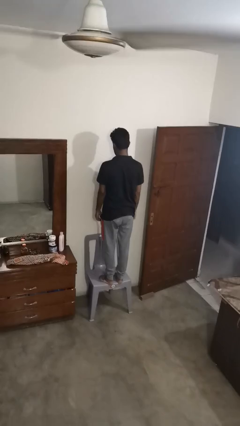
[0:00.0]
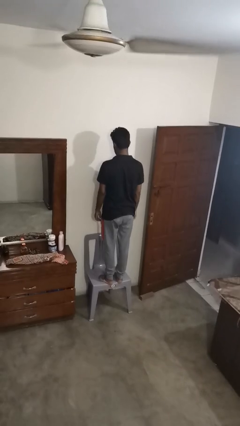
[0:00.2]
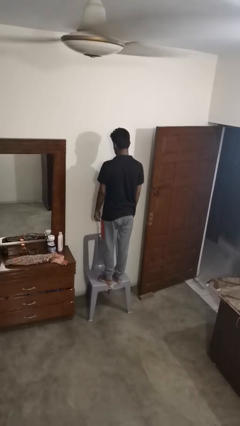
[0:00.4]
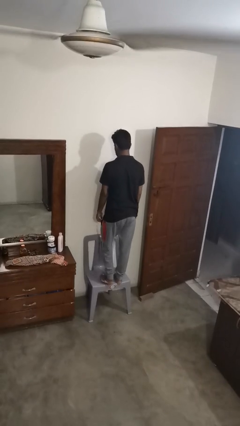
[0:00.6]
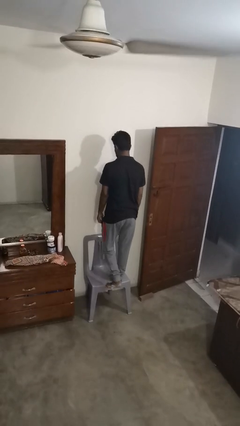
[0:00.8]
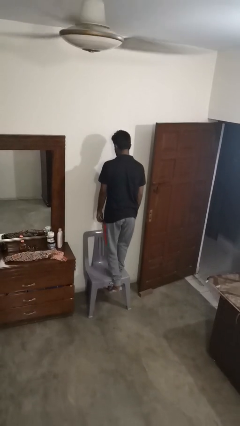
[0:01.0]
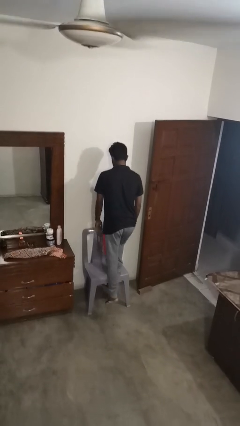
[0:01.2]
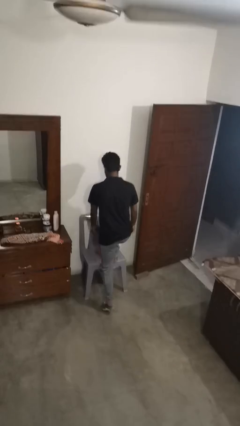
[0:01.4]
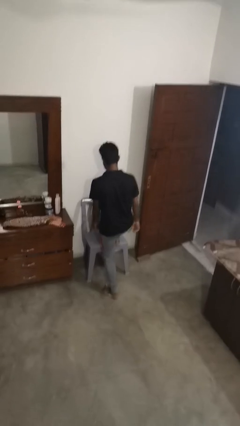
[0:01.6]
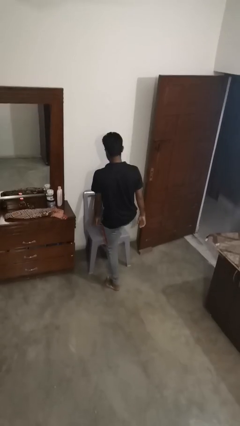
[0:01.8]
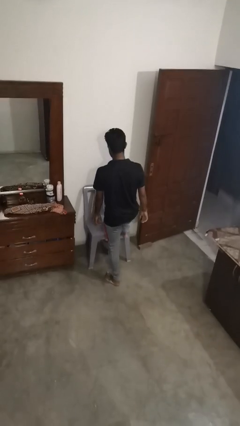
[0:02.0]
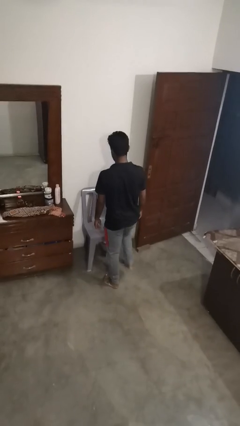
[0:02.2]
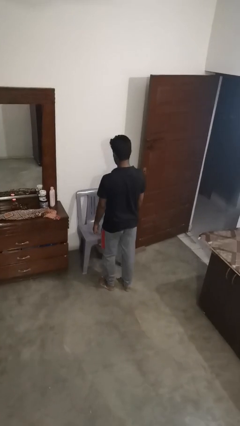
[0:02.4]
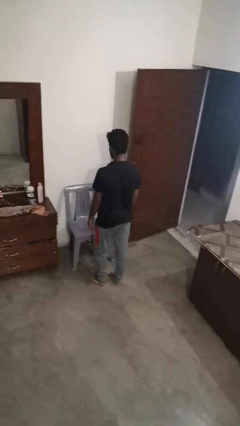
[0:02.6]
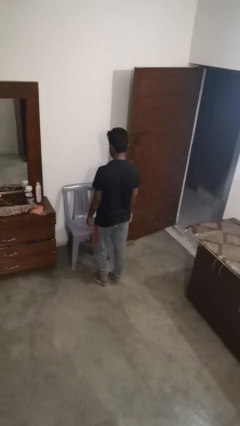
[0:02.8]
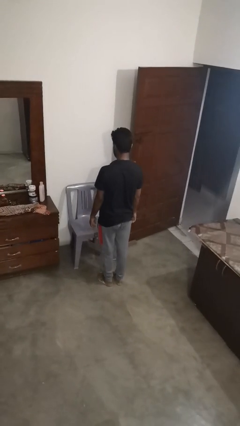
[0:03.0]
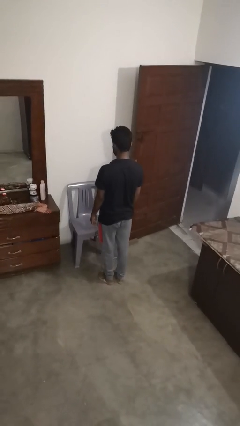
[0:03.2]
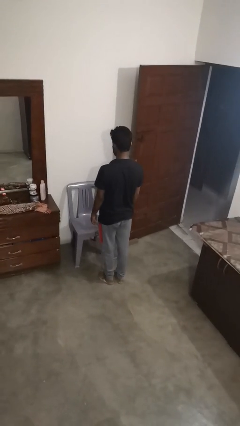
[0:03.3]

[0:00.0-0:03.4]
person climbs off chair

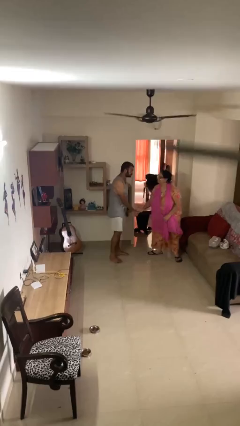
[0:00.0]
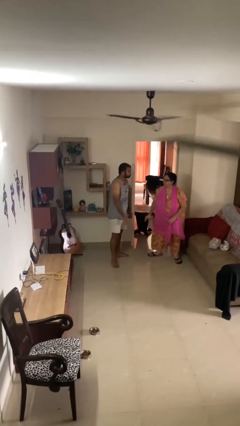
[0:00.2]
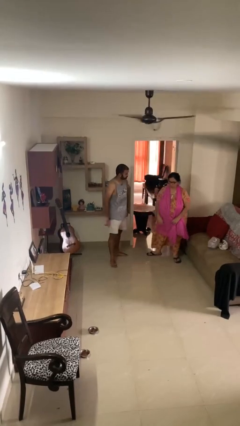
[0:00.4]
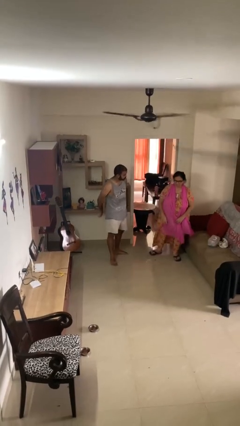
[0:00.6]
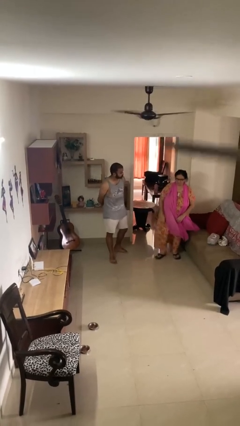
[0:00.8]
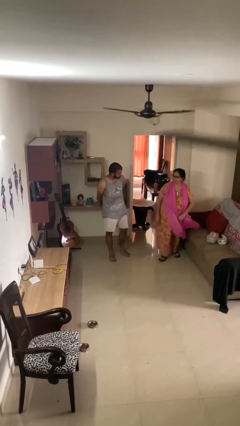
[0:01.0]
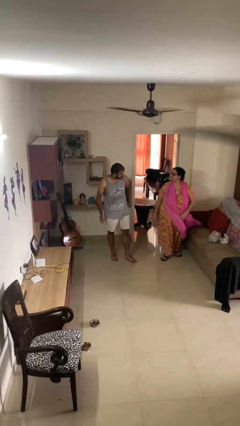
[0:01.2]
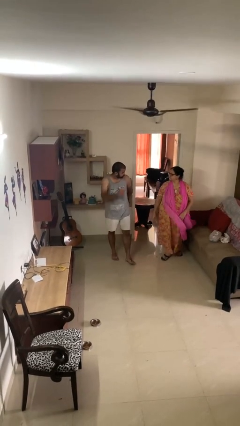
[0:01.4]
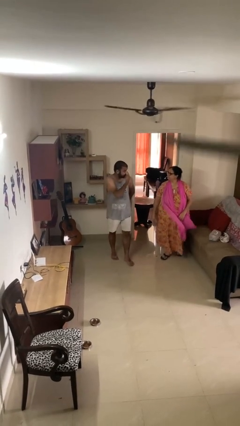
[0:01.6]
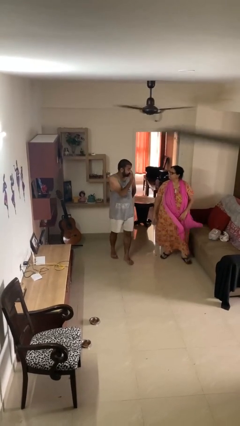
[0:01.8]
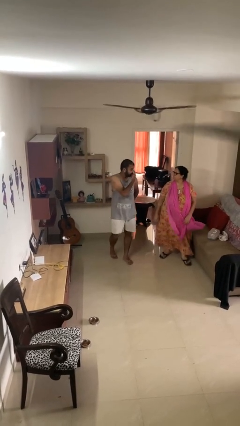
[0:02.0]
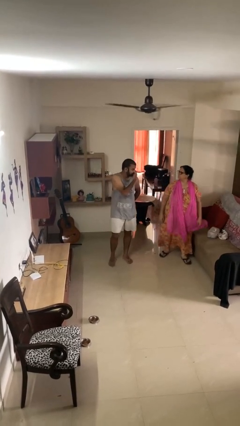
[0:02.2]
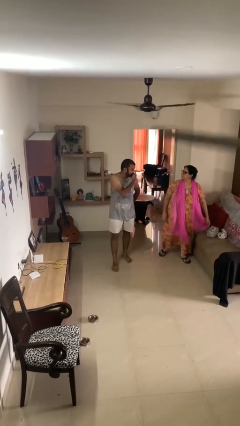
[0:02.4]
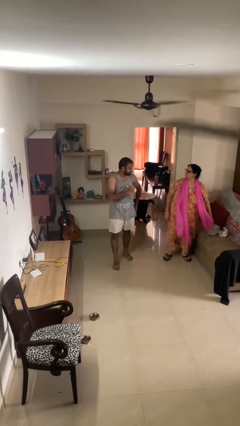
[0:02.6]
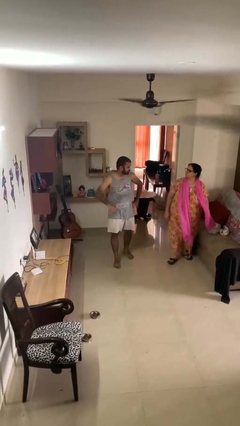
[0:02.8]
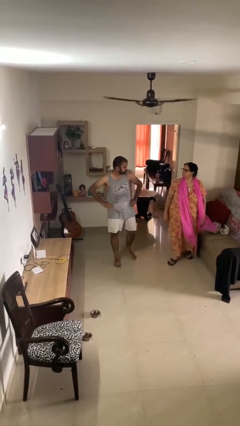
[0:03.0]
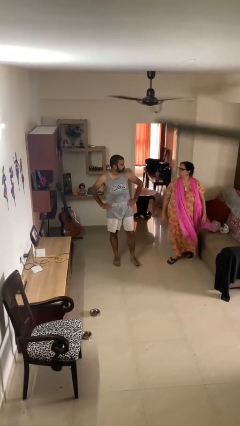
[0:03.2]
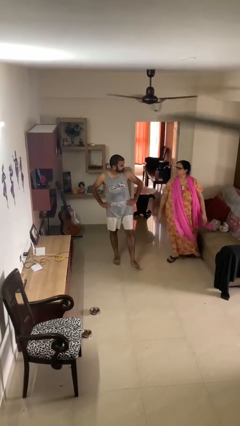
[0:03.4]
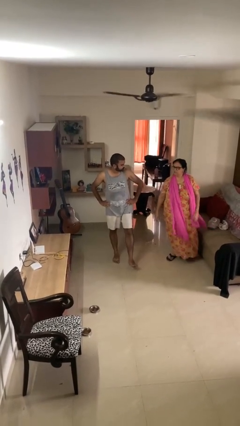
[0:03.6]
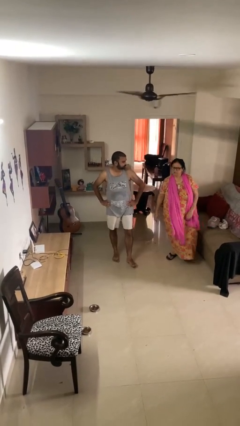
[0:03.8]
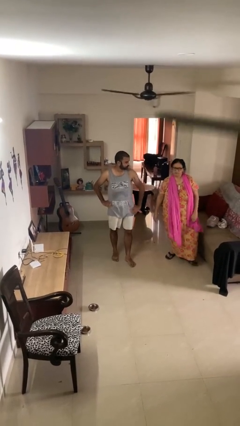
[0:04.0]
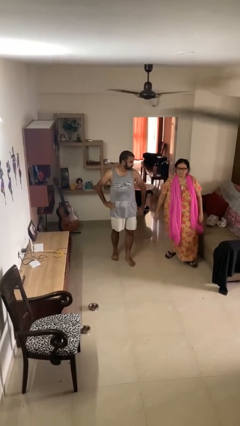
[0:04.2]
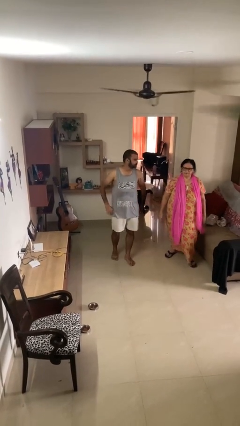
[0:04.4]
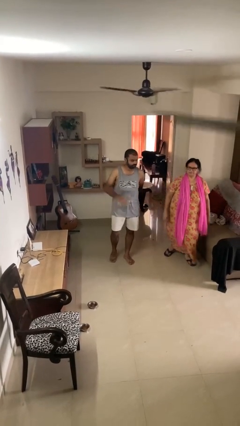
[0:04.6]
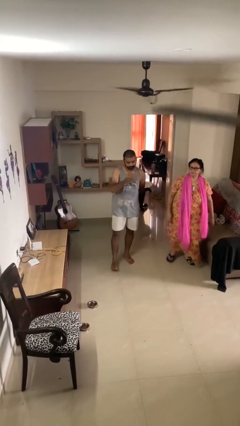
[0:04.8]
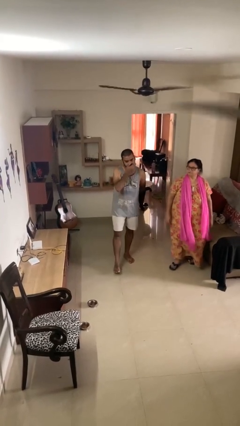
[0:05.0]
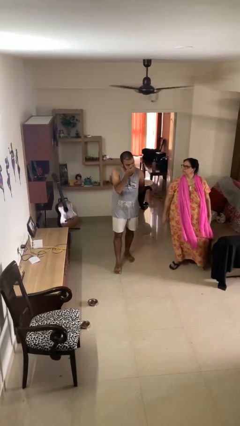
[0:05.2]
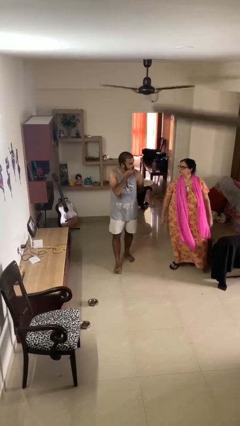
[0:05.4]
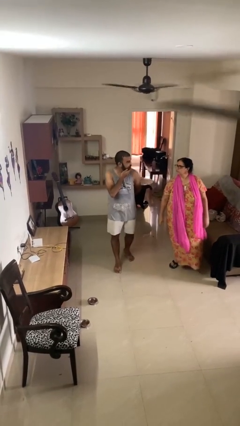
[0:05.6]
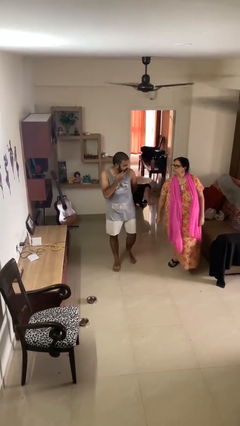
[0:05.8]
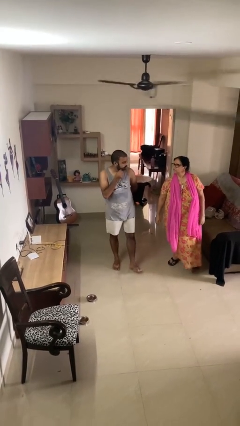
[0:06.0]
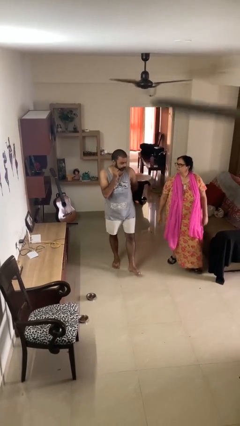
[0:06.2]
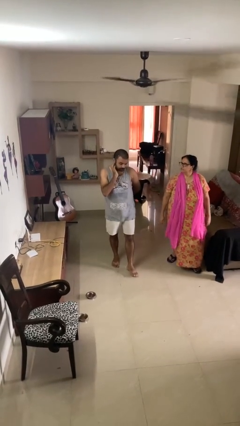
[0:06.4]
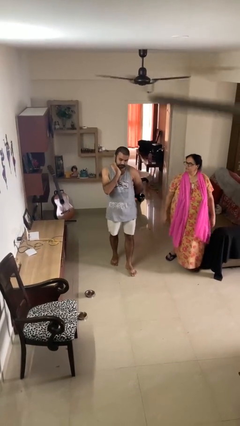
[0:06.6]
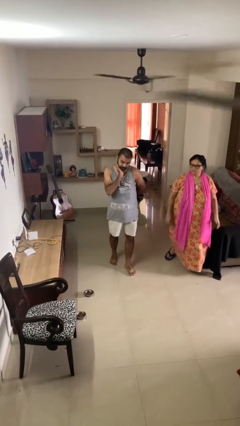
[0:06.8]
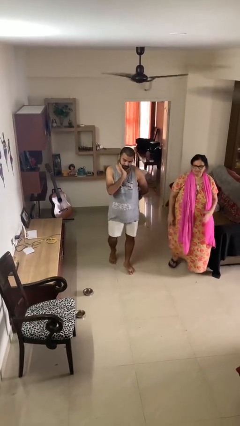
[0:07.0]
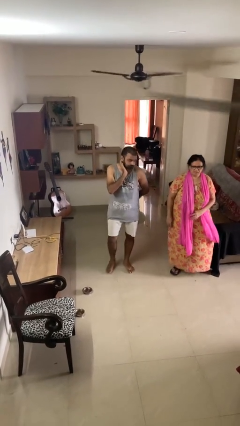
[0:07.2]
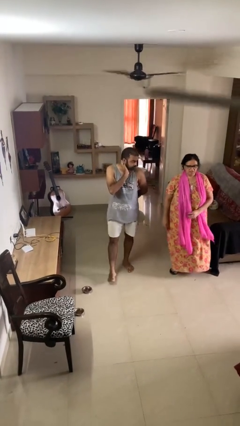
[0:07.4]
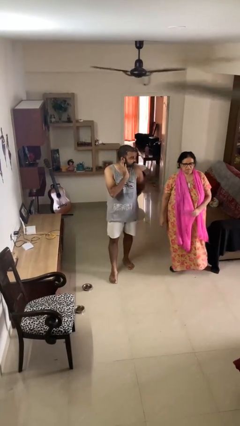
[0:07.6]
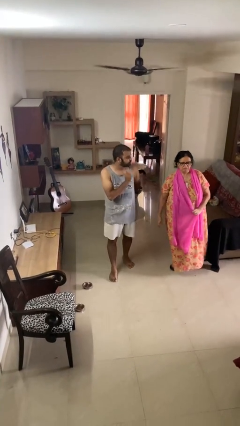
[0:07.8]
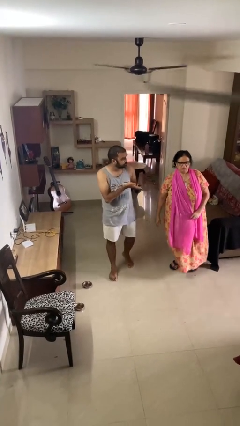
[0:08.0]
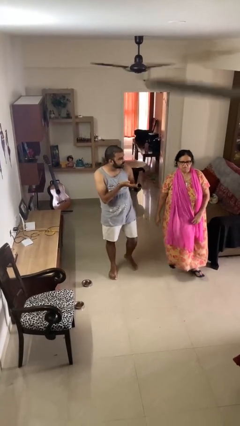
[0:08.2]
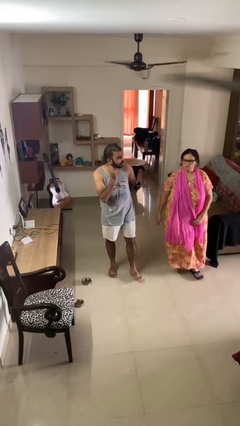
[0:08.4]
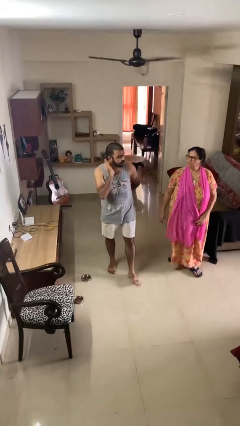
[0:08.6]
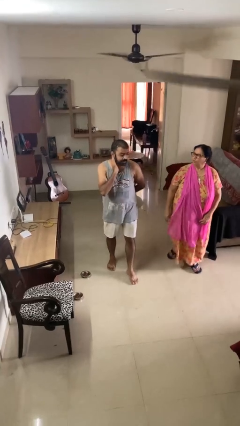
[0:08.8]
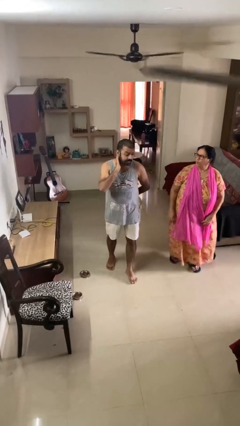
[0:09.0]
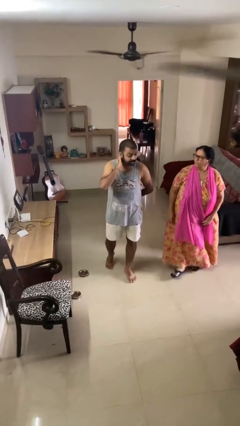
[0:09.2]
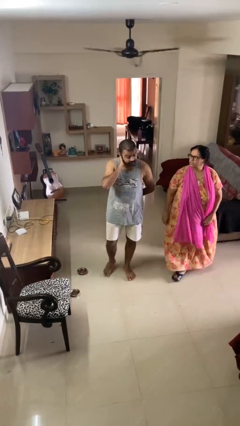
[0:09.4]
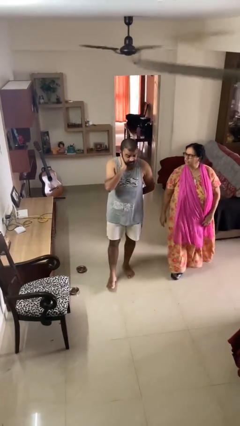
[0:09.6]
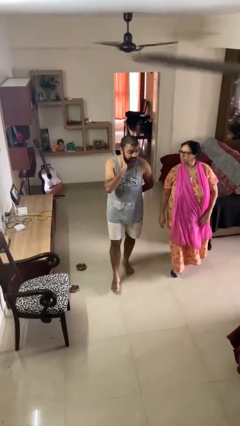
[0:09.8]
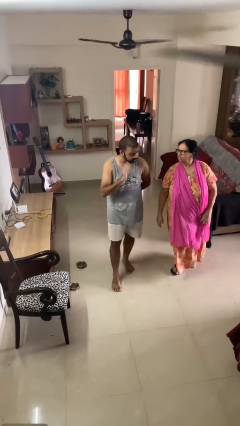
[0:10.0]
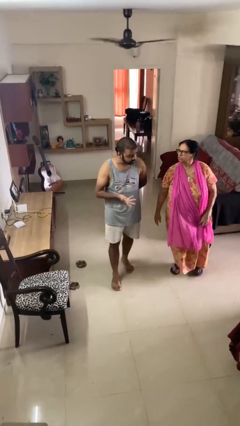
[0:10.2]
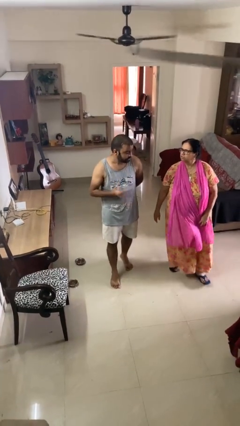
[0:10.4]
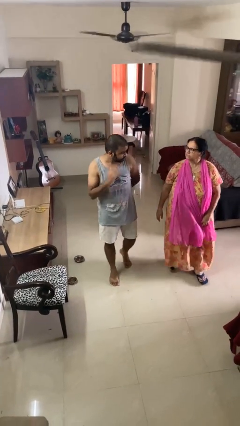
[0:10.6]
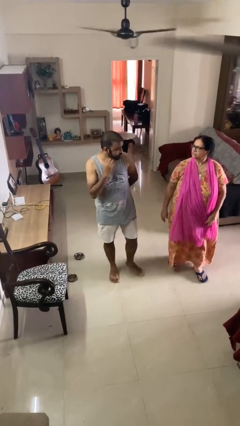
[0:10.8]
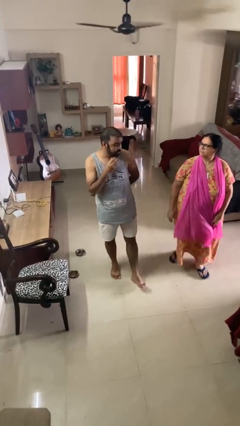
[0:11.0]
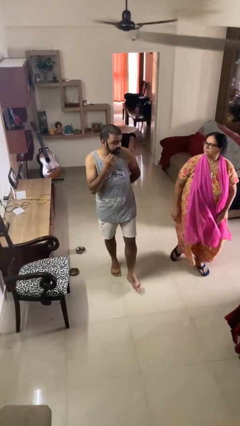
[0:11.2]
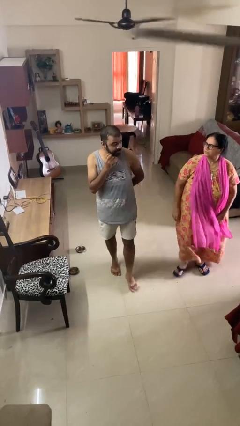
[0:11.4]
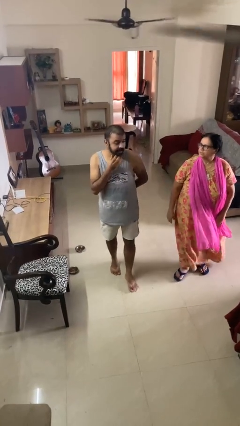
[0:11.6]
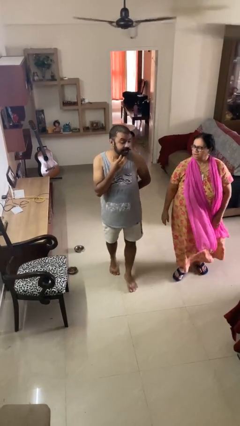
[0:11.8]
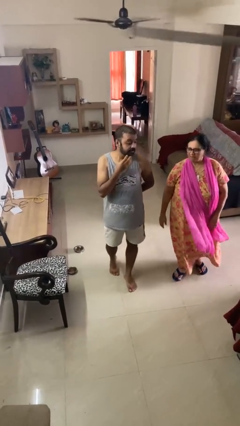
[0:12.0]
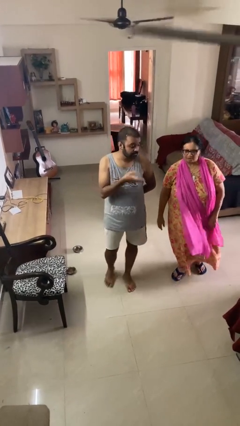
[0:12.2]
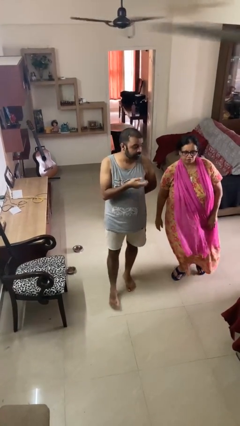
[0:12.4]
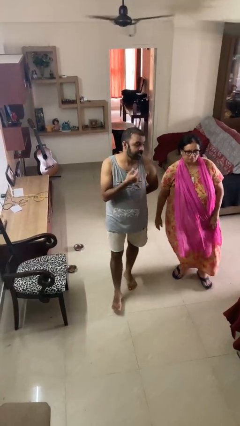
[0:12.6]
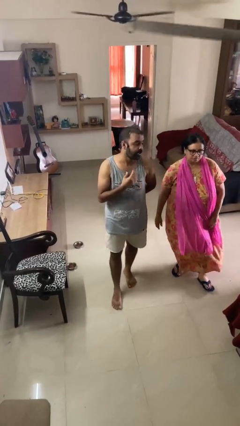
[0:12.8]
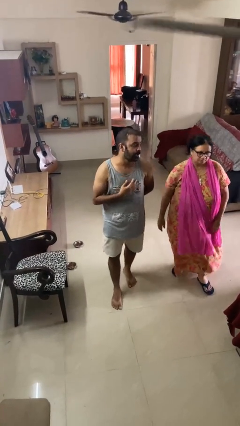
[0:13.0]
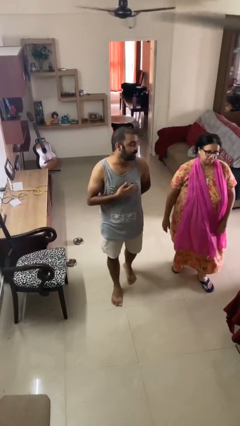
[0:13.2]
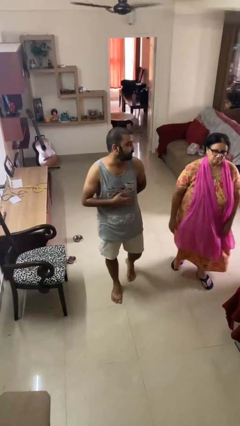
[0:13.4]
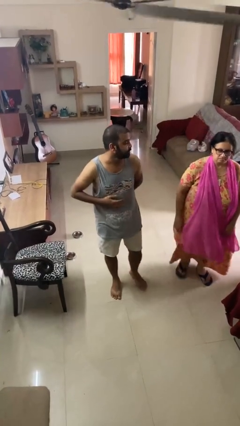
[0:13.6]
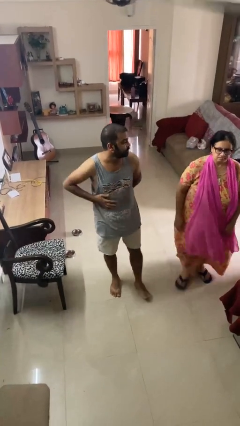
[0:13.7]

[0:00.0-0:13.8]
person talks to person

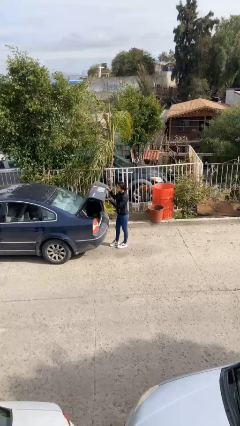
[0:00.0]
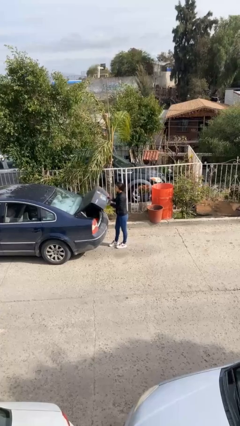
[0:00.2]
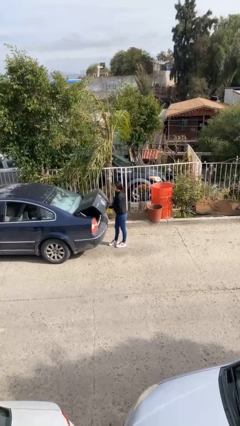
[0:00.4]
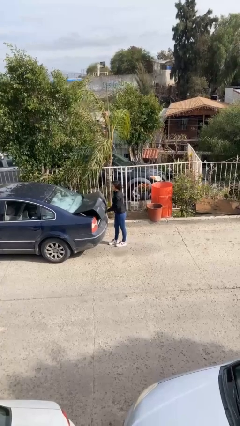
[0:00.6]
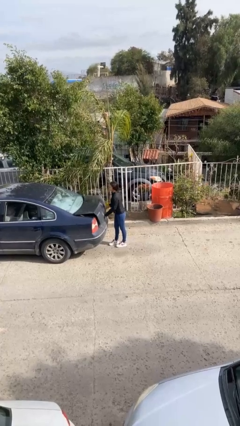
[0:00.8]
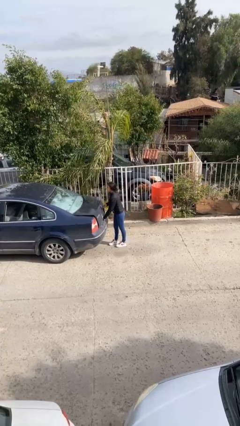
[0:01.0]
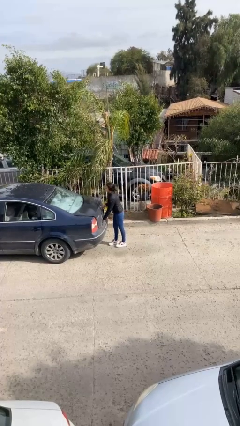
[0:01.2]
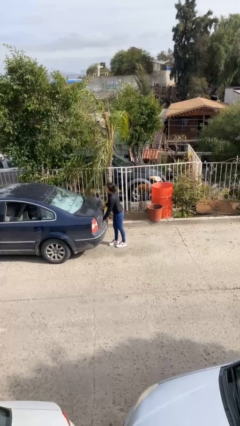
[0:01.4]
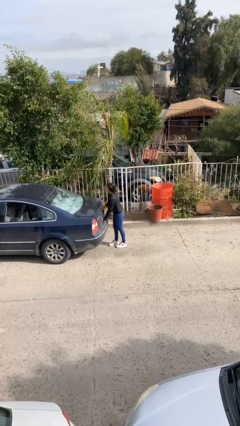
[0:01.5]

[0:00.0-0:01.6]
person closes car trunk
